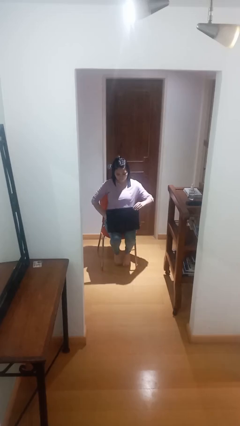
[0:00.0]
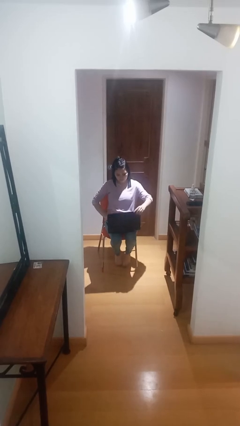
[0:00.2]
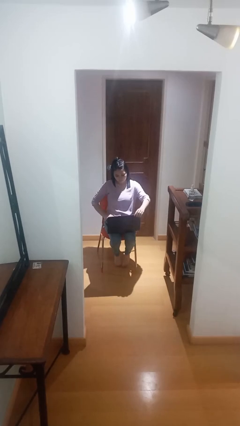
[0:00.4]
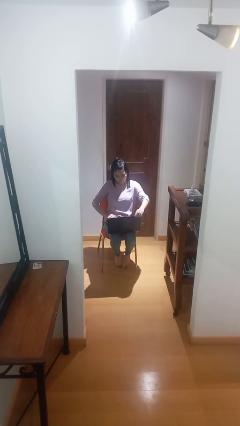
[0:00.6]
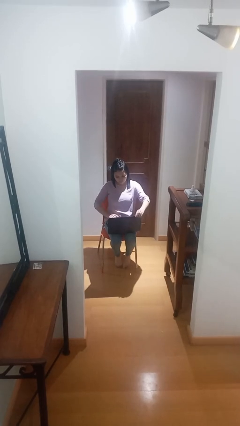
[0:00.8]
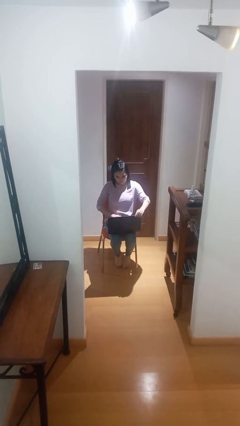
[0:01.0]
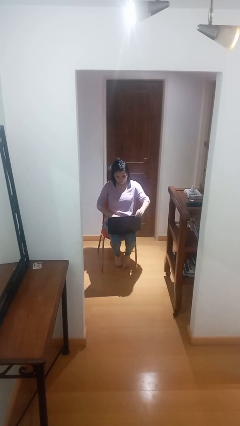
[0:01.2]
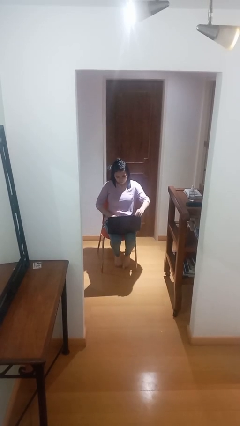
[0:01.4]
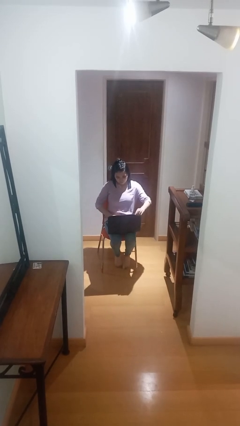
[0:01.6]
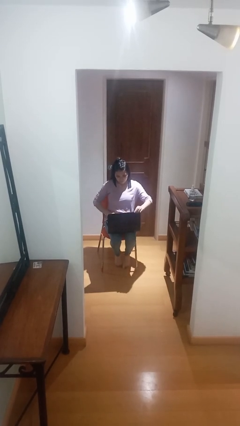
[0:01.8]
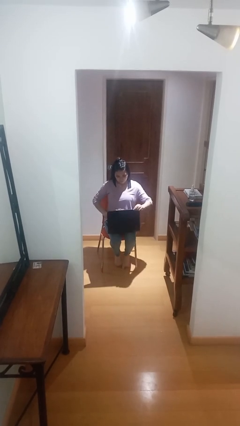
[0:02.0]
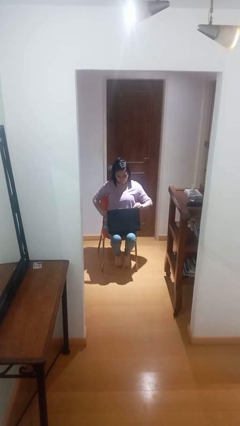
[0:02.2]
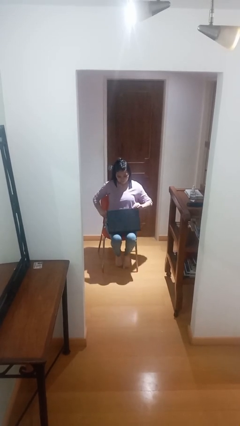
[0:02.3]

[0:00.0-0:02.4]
person interacts with laptop

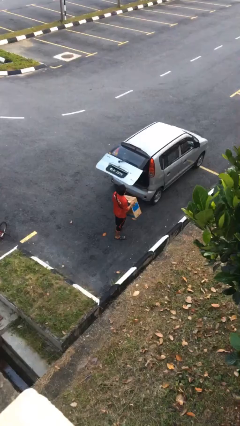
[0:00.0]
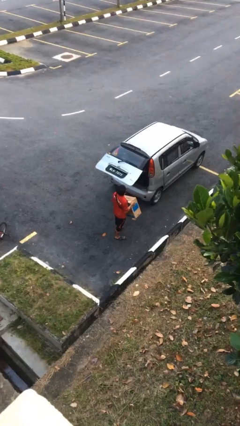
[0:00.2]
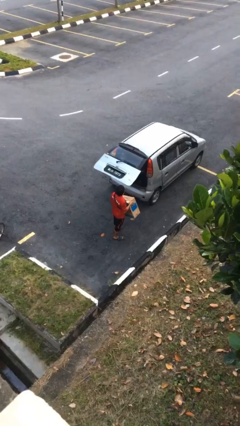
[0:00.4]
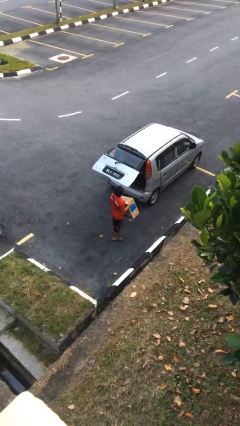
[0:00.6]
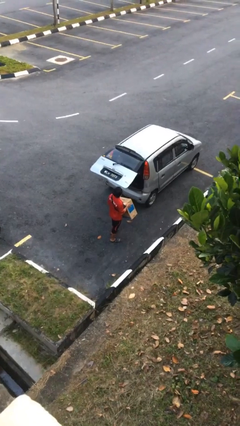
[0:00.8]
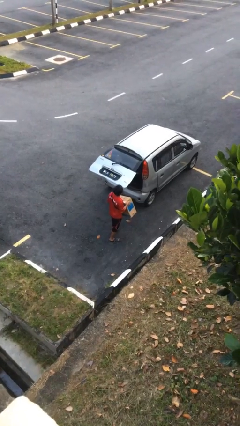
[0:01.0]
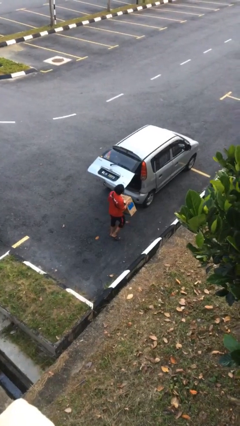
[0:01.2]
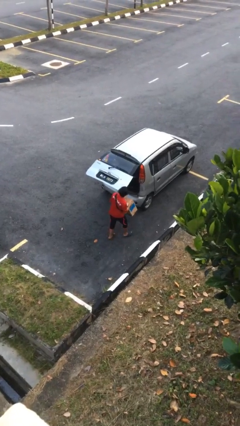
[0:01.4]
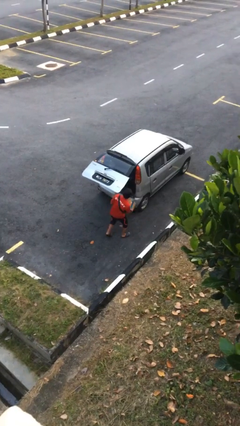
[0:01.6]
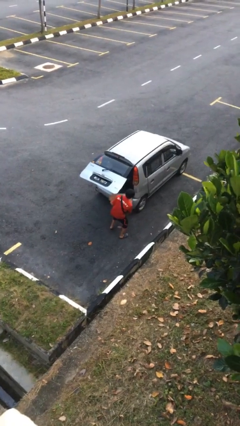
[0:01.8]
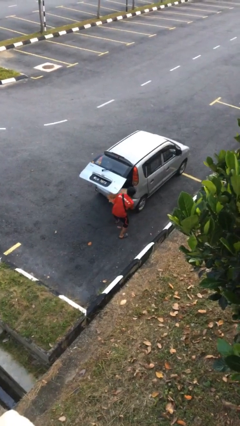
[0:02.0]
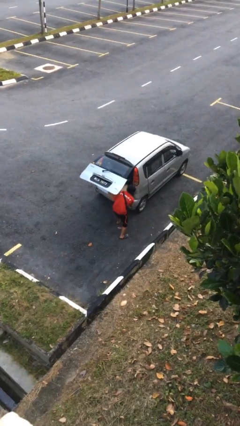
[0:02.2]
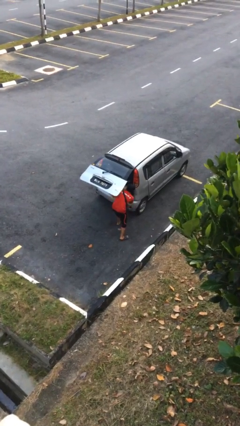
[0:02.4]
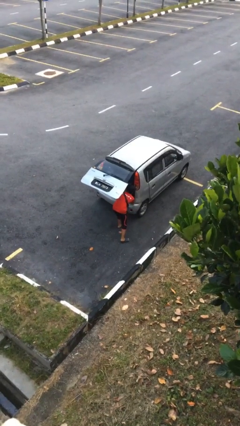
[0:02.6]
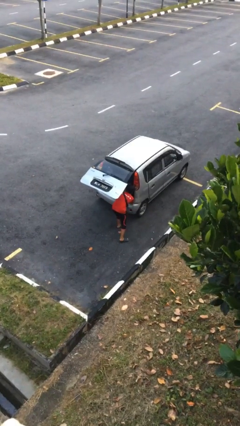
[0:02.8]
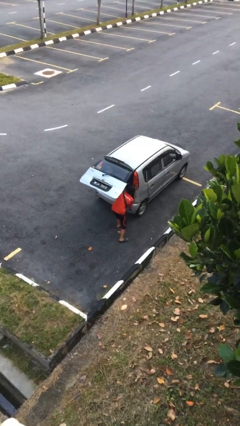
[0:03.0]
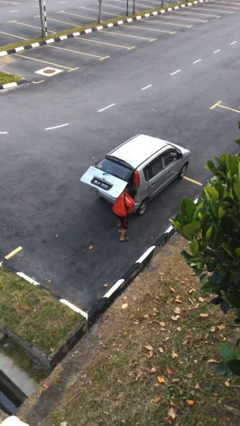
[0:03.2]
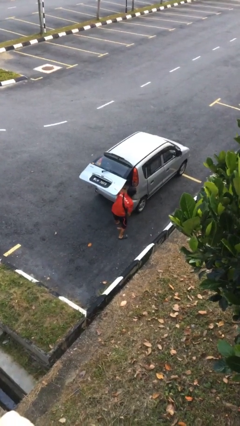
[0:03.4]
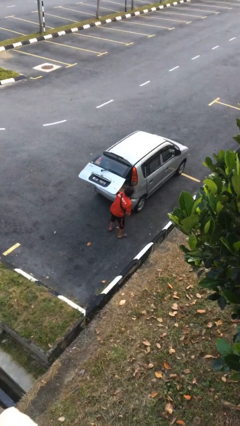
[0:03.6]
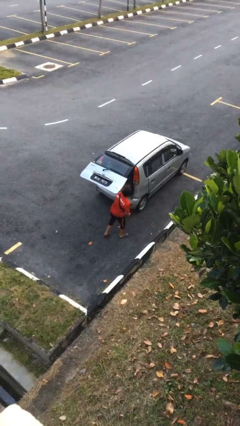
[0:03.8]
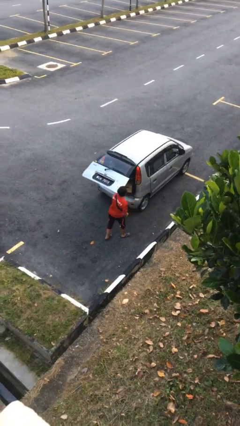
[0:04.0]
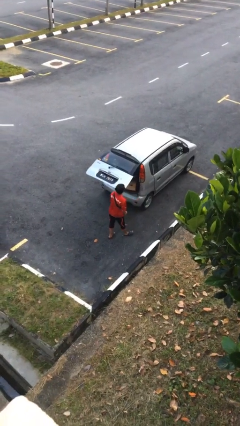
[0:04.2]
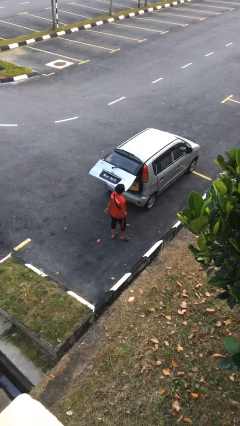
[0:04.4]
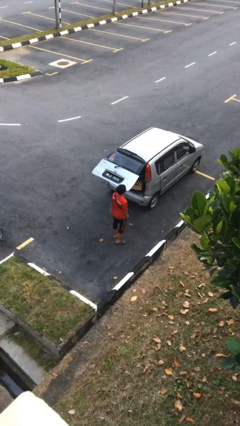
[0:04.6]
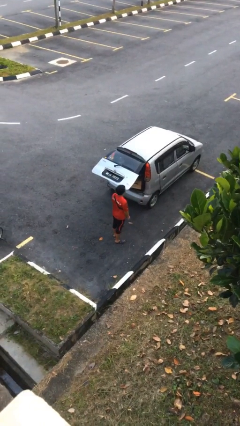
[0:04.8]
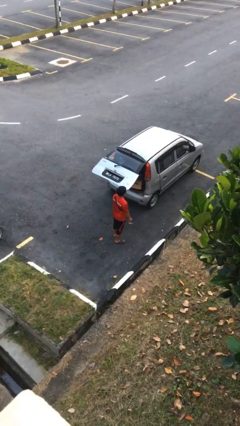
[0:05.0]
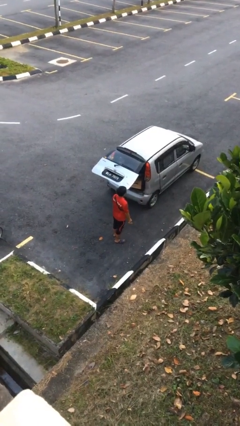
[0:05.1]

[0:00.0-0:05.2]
person loads car

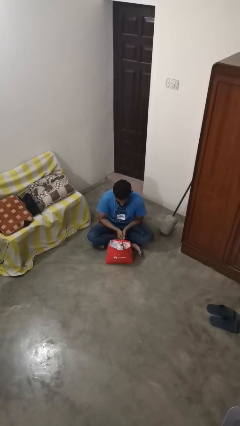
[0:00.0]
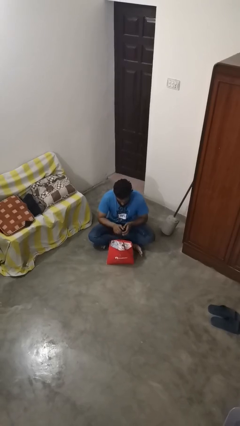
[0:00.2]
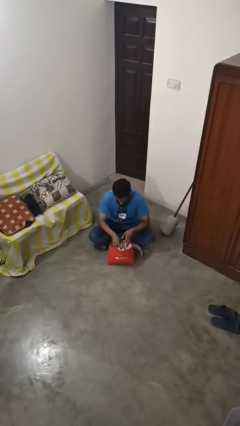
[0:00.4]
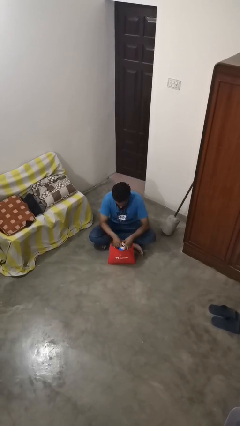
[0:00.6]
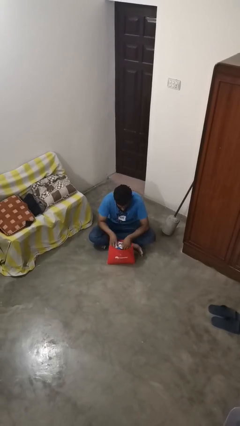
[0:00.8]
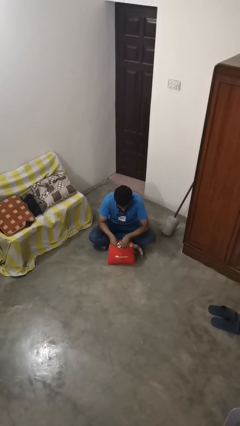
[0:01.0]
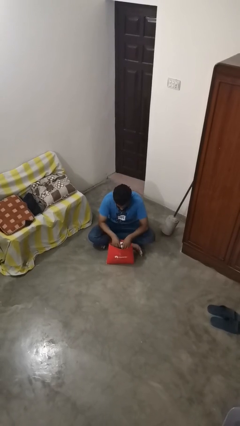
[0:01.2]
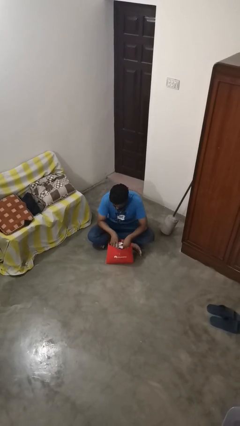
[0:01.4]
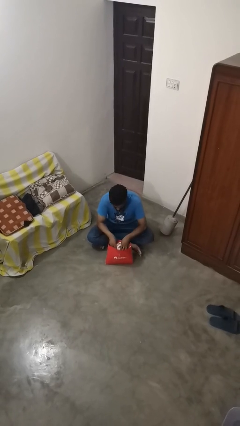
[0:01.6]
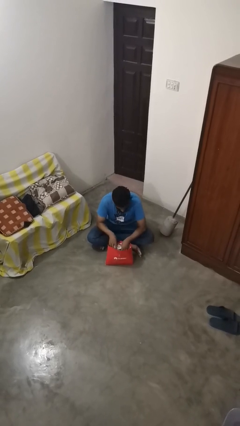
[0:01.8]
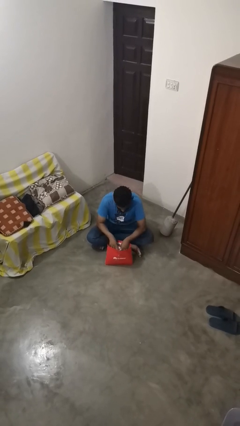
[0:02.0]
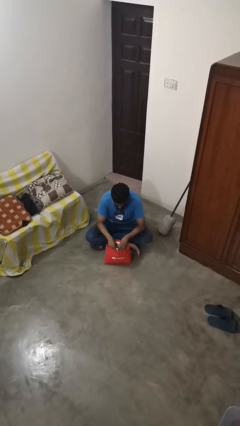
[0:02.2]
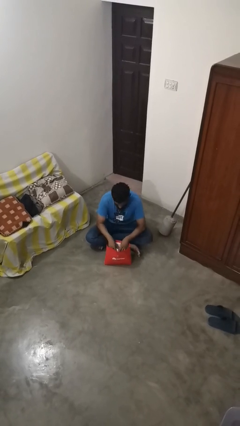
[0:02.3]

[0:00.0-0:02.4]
person searches in bag

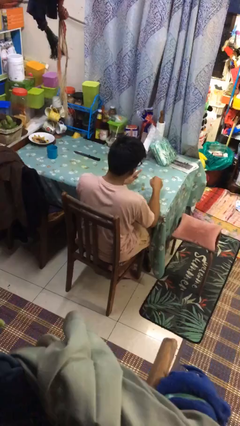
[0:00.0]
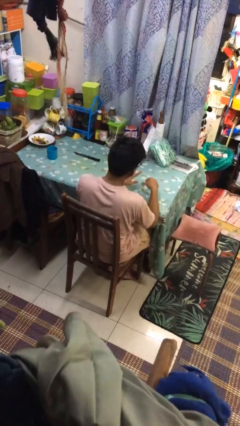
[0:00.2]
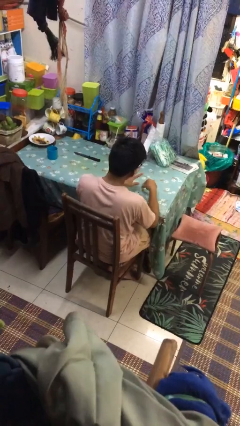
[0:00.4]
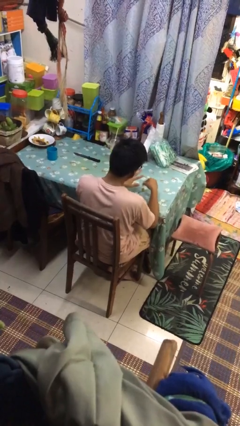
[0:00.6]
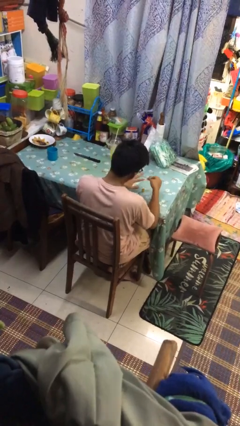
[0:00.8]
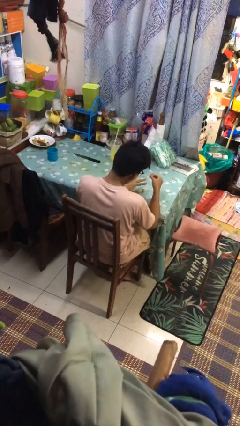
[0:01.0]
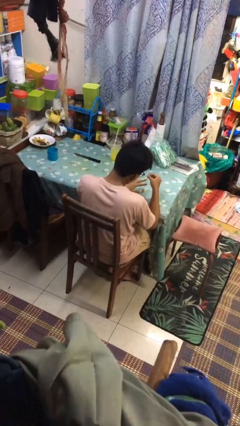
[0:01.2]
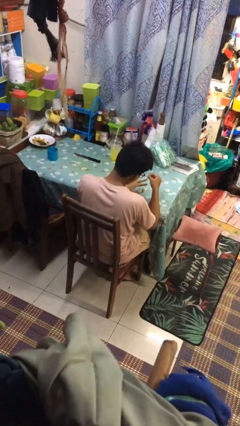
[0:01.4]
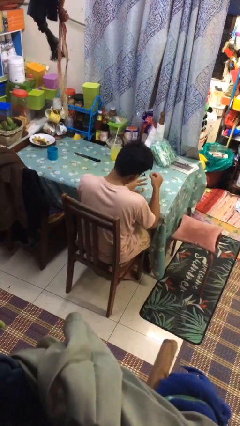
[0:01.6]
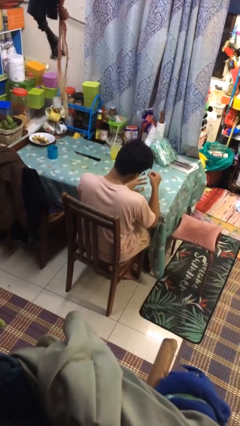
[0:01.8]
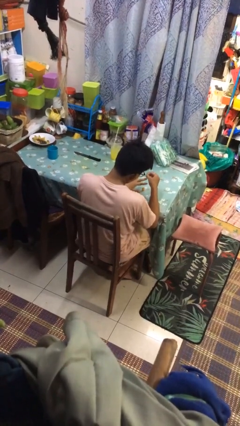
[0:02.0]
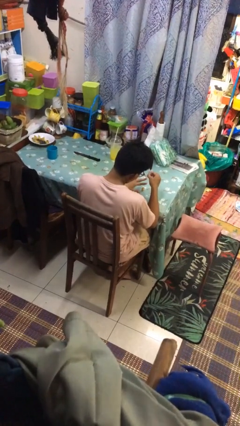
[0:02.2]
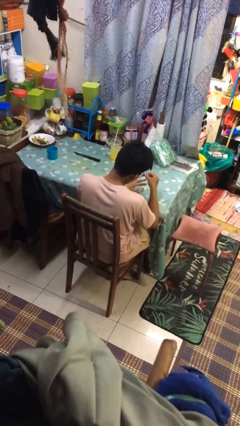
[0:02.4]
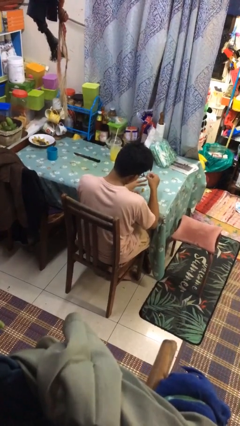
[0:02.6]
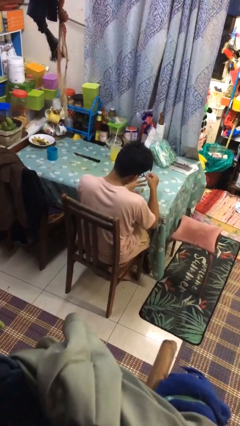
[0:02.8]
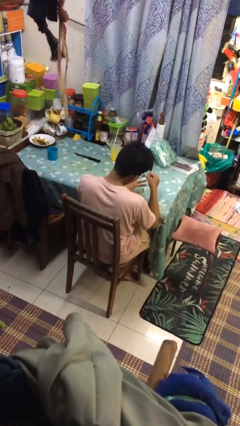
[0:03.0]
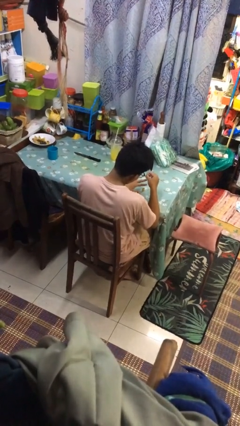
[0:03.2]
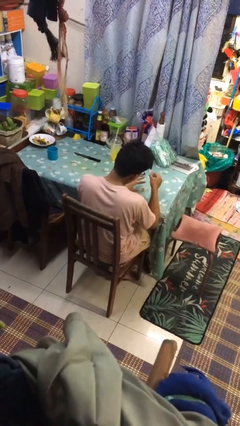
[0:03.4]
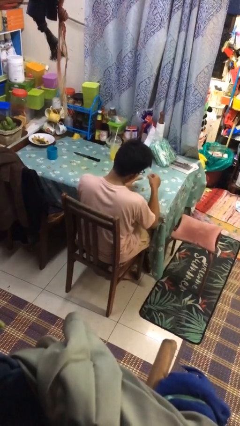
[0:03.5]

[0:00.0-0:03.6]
person paints fingernails

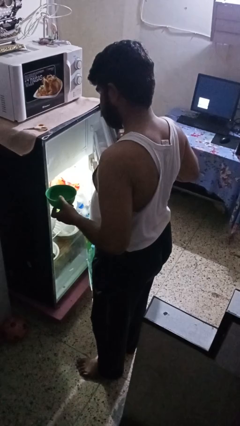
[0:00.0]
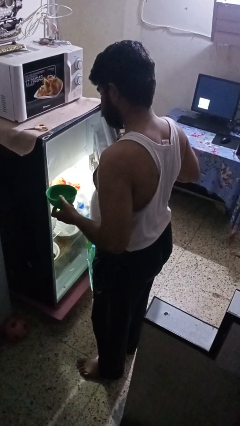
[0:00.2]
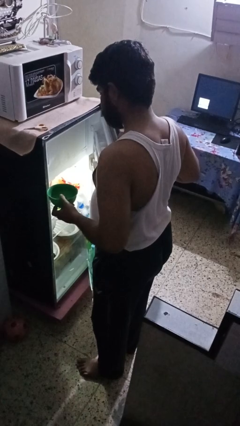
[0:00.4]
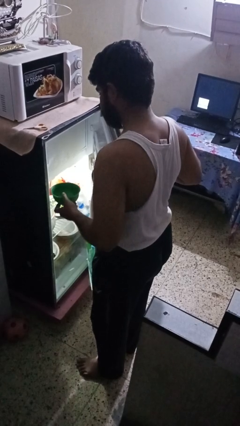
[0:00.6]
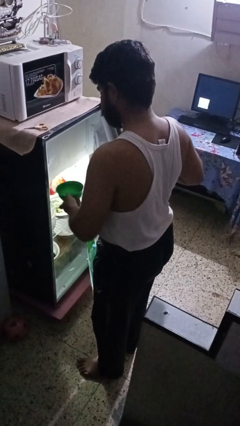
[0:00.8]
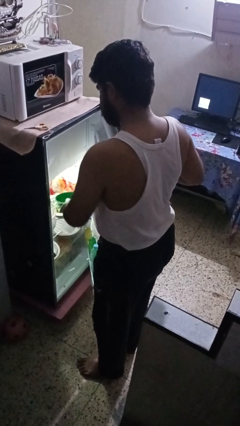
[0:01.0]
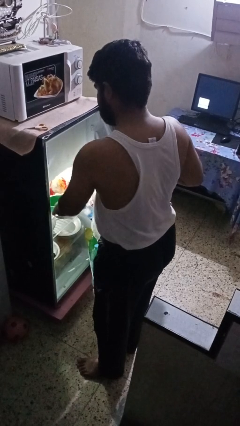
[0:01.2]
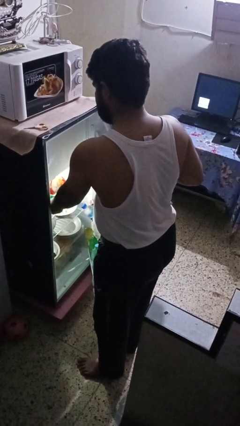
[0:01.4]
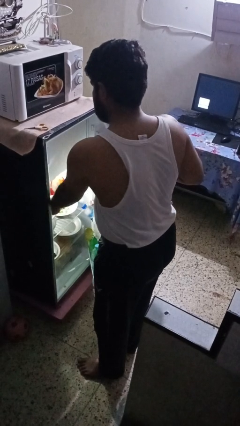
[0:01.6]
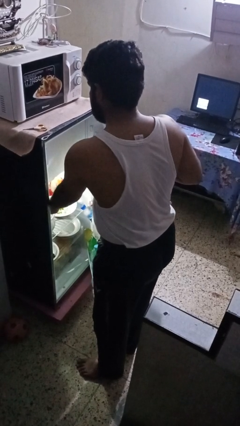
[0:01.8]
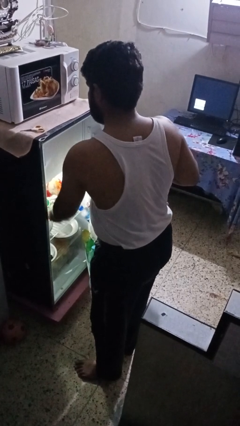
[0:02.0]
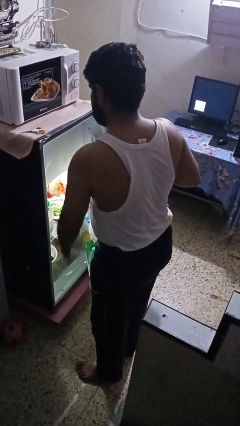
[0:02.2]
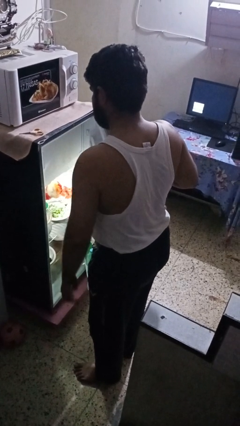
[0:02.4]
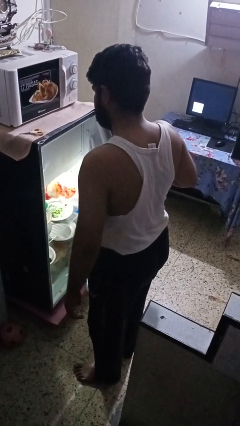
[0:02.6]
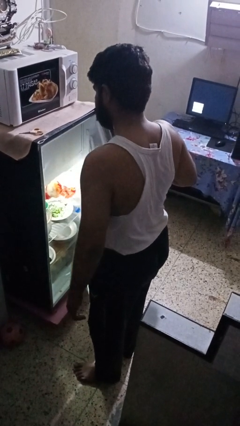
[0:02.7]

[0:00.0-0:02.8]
person puts object into refrigerator

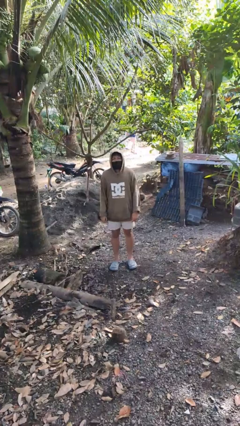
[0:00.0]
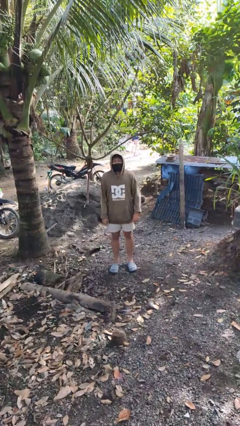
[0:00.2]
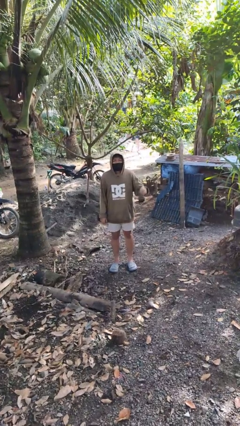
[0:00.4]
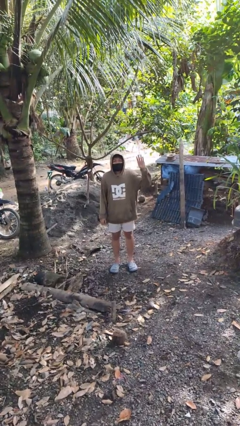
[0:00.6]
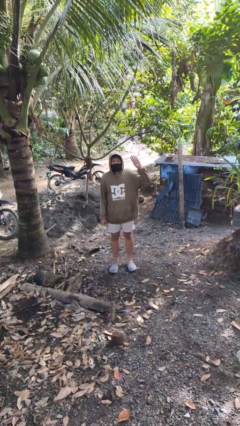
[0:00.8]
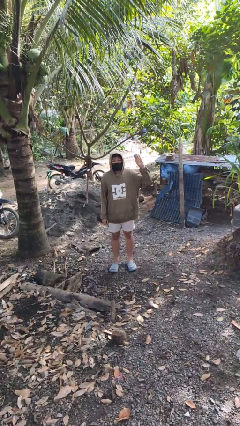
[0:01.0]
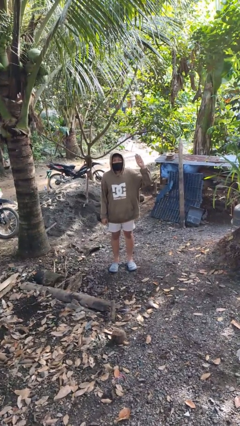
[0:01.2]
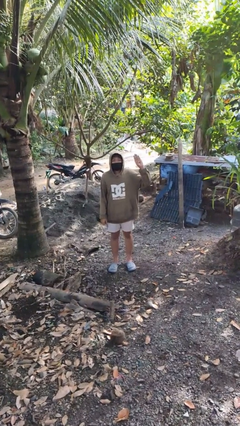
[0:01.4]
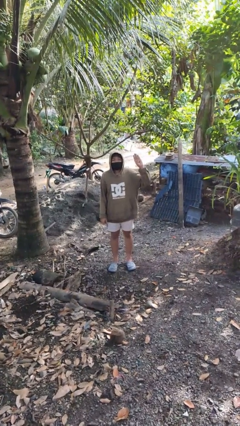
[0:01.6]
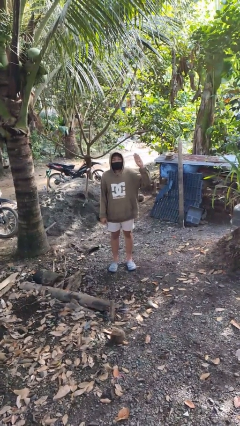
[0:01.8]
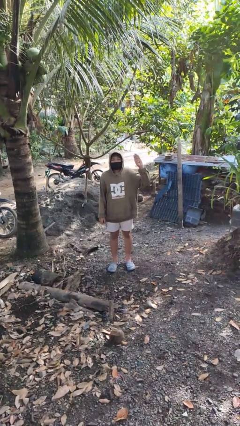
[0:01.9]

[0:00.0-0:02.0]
person gestures number four
